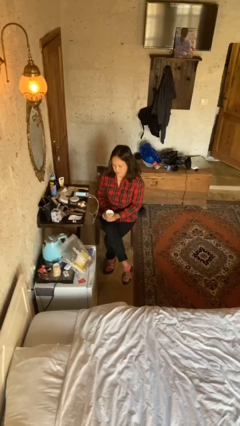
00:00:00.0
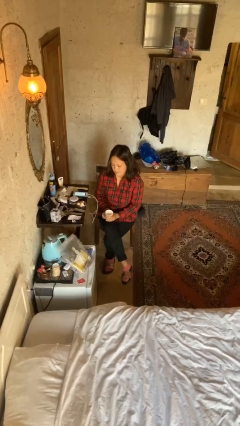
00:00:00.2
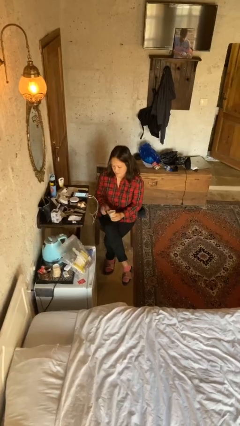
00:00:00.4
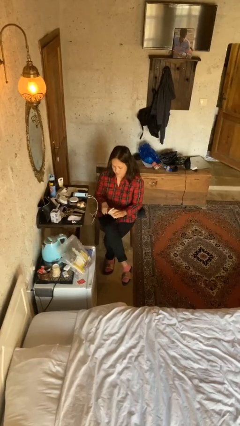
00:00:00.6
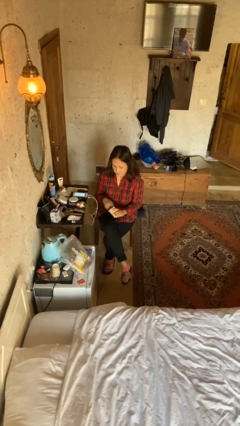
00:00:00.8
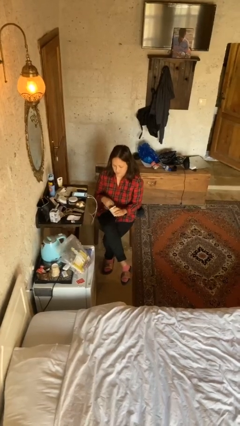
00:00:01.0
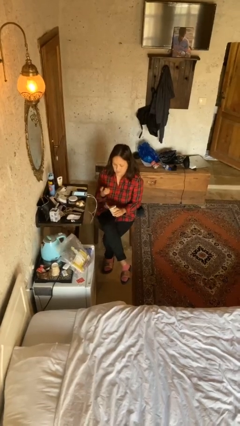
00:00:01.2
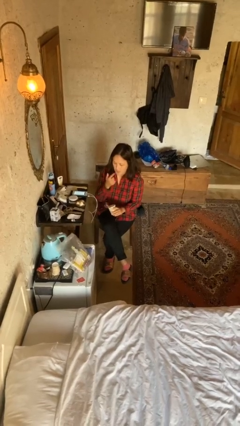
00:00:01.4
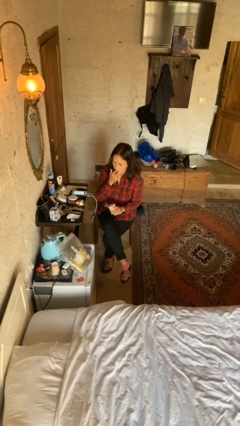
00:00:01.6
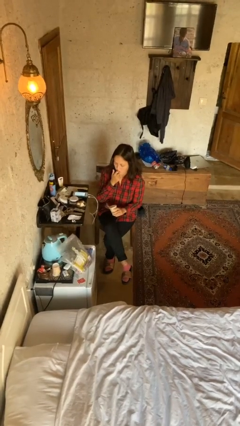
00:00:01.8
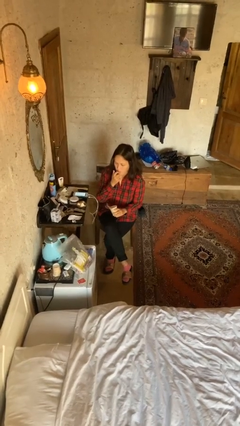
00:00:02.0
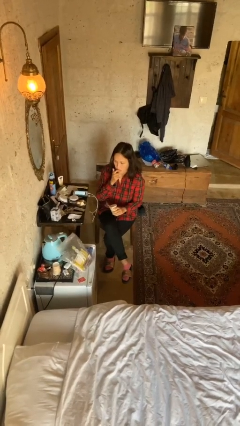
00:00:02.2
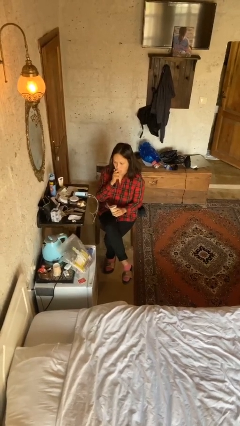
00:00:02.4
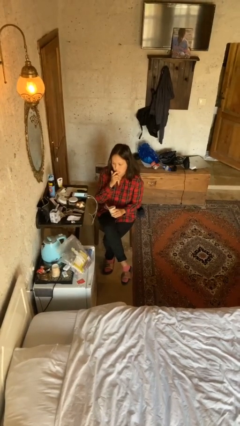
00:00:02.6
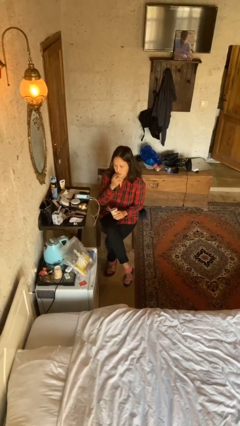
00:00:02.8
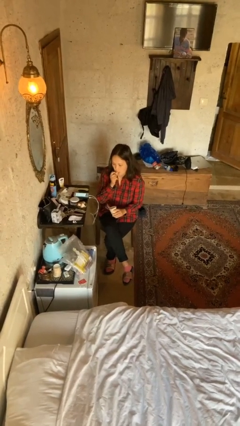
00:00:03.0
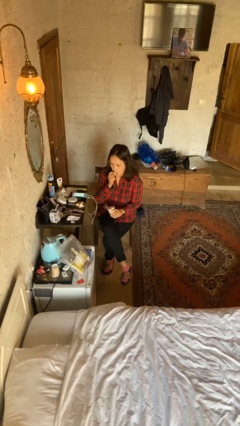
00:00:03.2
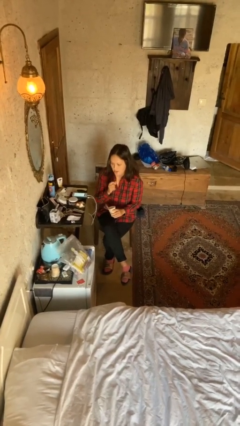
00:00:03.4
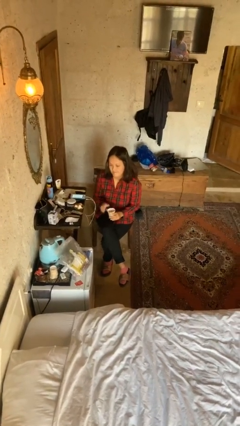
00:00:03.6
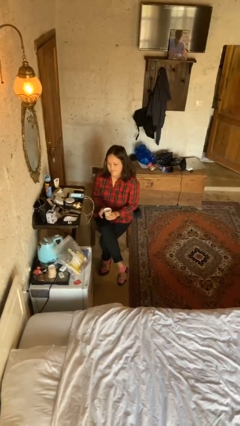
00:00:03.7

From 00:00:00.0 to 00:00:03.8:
person licks fingers

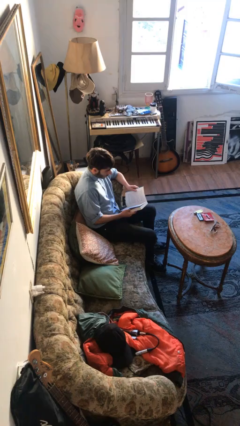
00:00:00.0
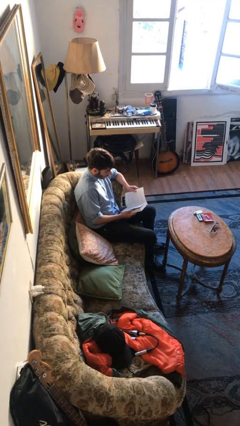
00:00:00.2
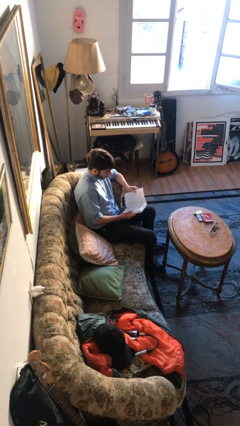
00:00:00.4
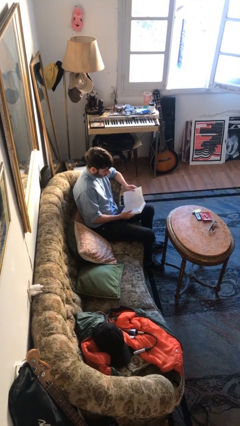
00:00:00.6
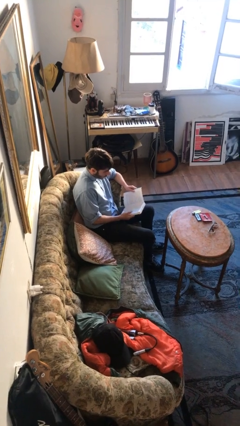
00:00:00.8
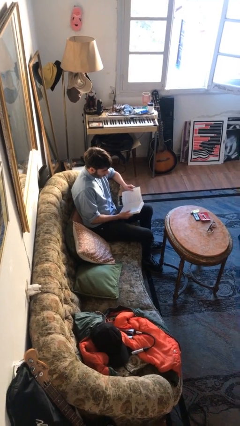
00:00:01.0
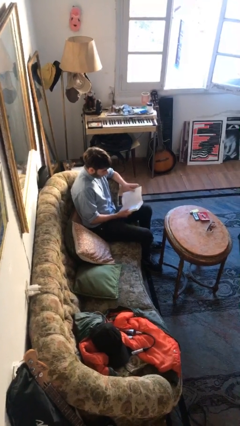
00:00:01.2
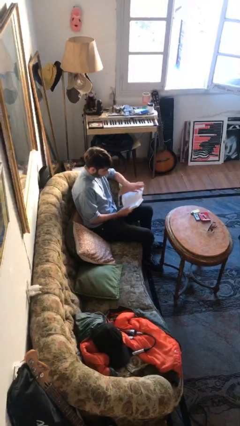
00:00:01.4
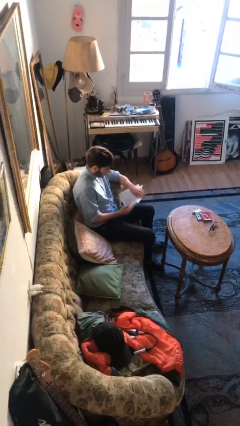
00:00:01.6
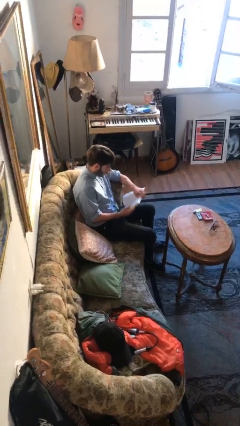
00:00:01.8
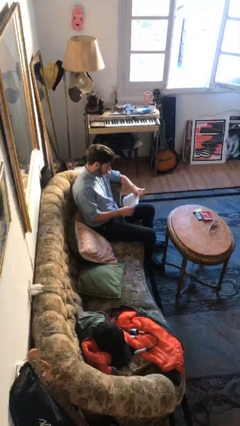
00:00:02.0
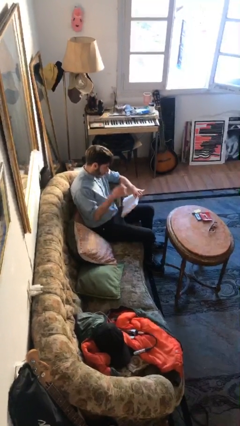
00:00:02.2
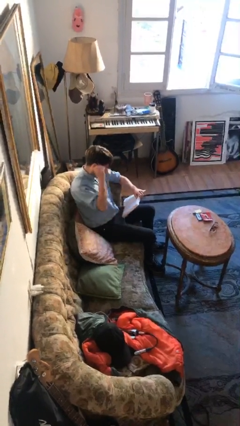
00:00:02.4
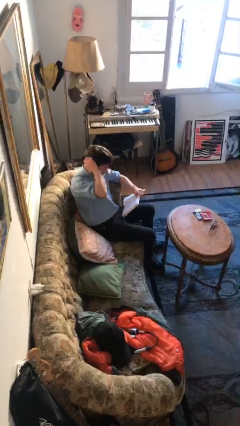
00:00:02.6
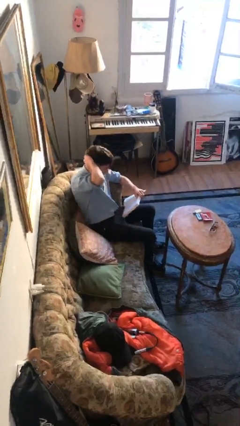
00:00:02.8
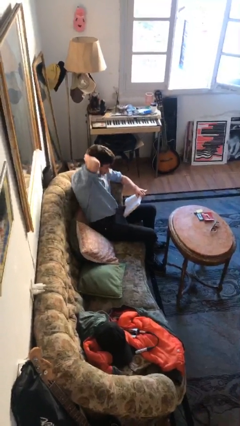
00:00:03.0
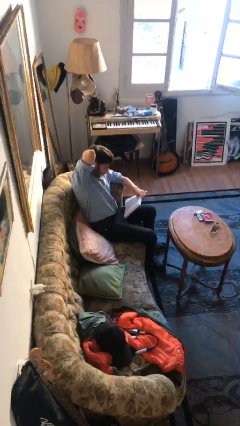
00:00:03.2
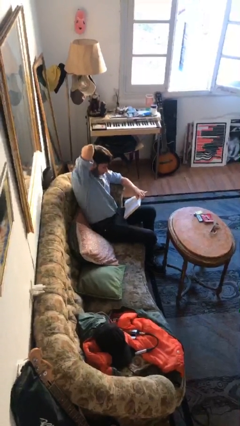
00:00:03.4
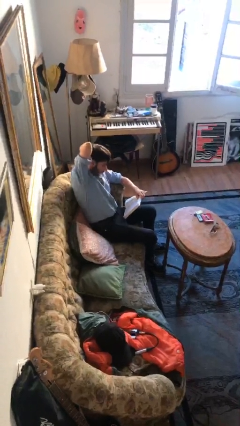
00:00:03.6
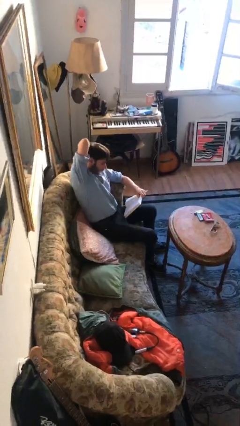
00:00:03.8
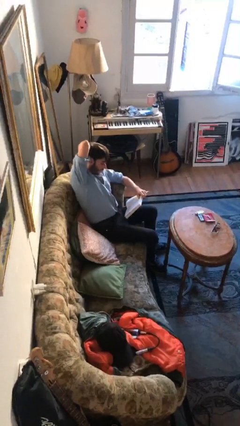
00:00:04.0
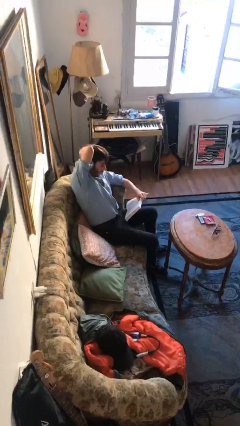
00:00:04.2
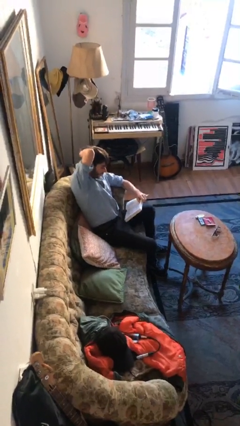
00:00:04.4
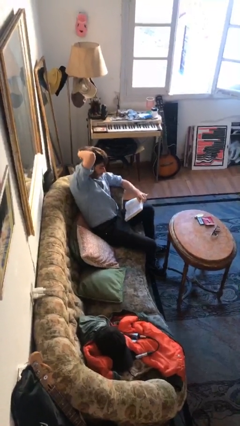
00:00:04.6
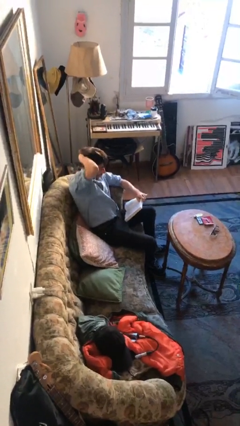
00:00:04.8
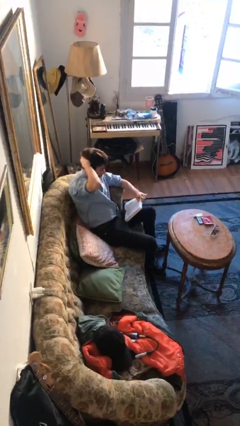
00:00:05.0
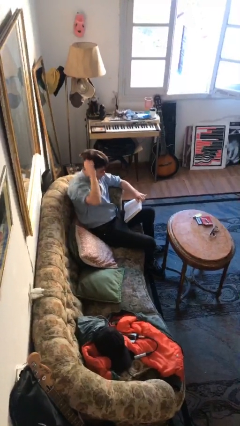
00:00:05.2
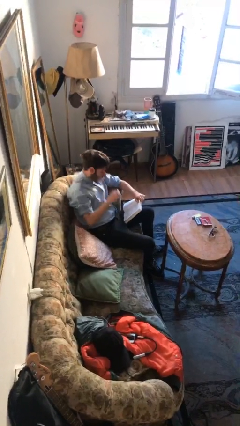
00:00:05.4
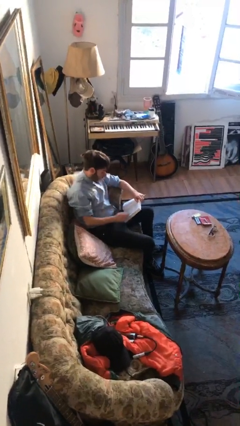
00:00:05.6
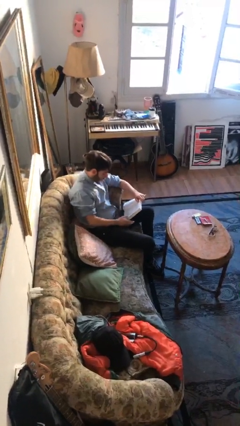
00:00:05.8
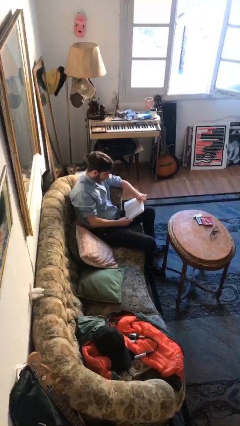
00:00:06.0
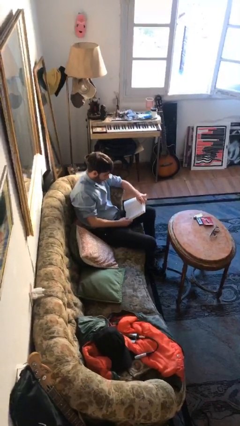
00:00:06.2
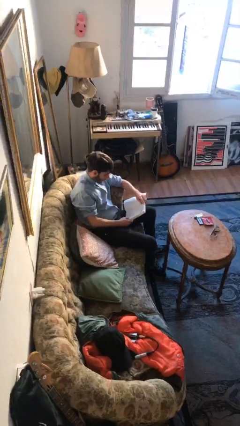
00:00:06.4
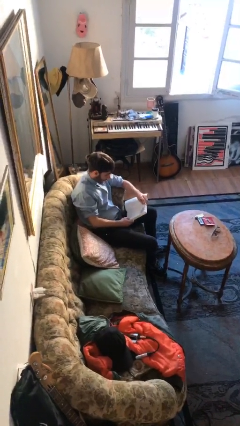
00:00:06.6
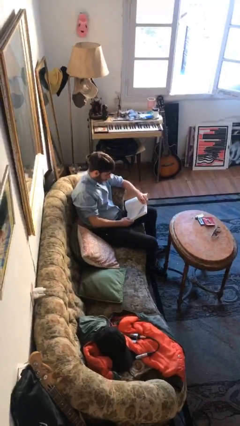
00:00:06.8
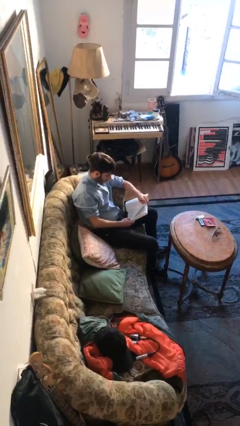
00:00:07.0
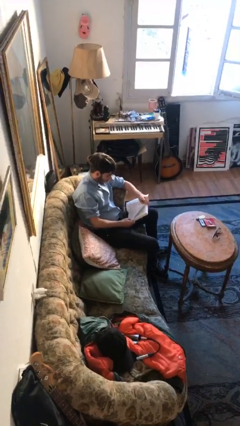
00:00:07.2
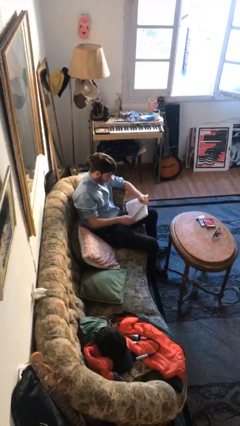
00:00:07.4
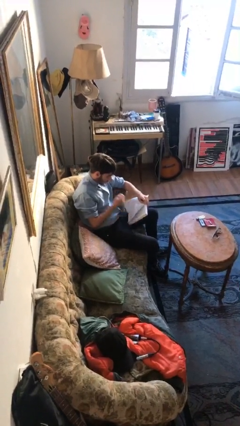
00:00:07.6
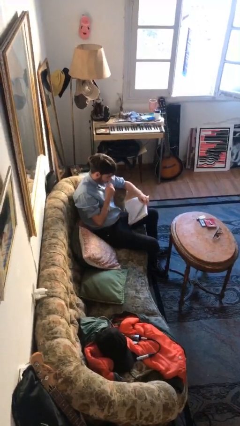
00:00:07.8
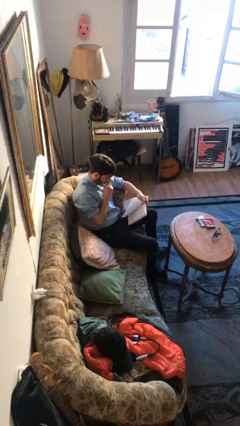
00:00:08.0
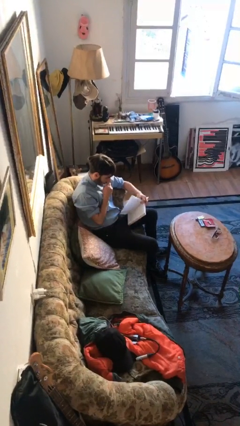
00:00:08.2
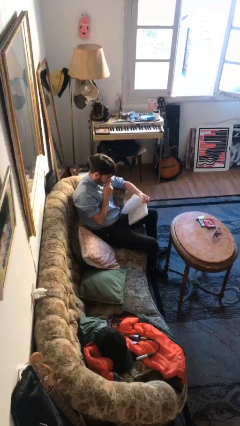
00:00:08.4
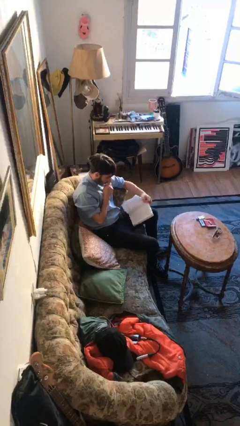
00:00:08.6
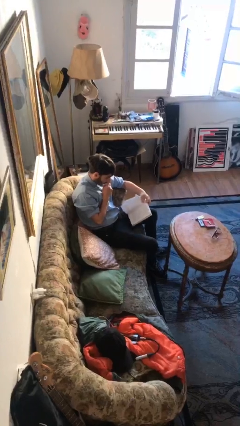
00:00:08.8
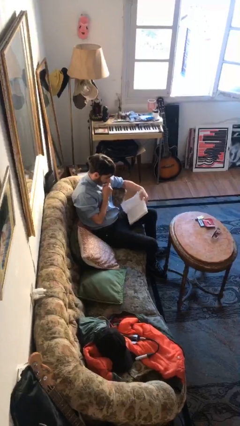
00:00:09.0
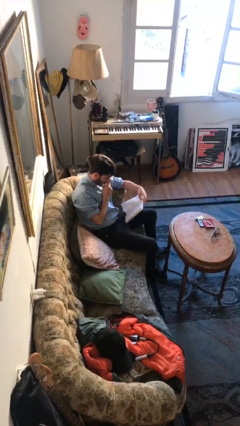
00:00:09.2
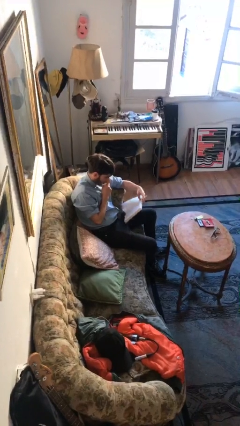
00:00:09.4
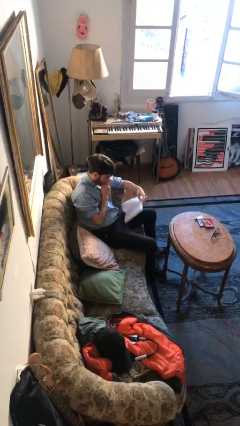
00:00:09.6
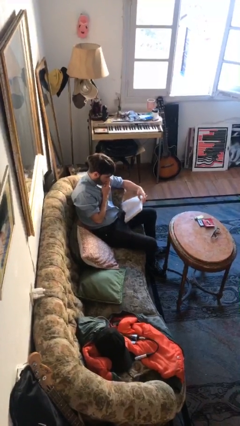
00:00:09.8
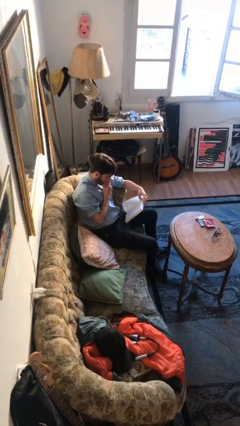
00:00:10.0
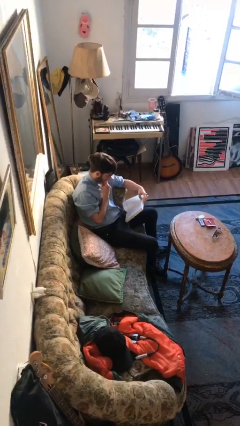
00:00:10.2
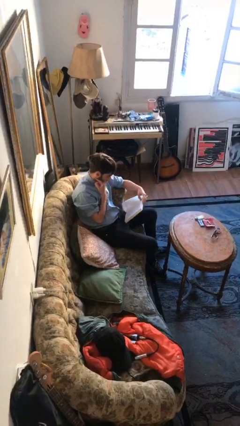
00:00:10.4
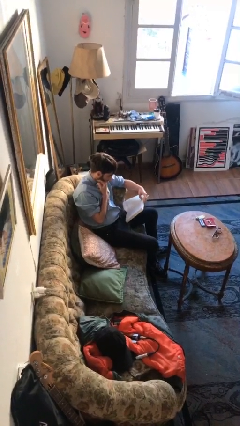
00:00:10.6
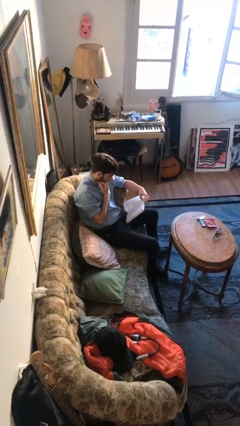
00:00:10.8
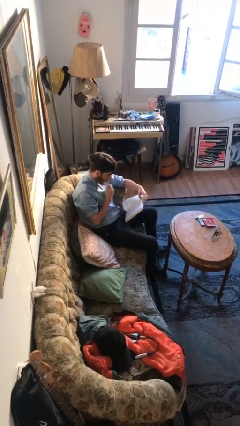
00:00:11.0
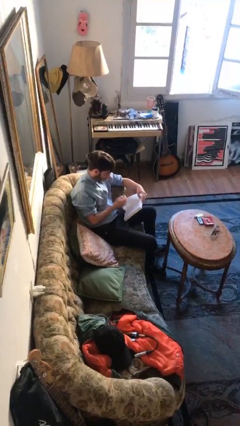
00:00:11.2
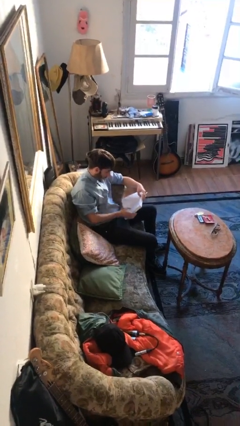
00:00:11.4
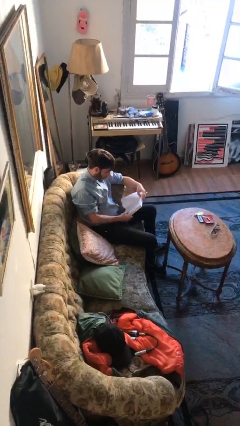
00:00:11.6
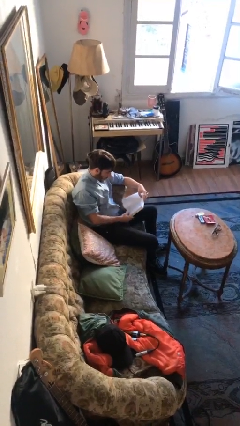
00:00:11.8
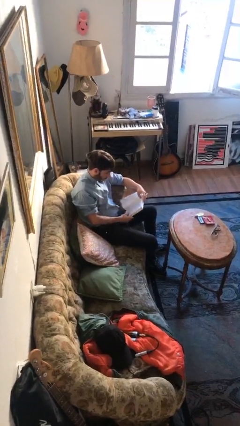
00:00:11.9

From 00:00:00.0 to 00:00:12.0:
person reads document

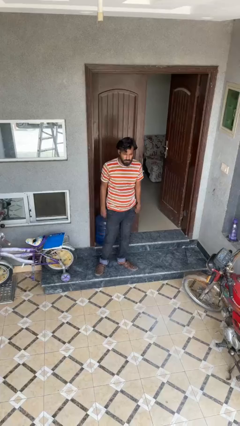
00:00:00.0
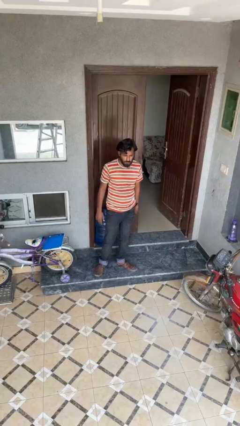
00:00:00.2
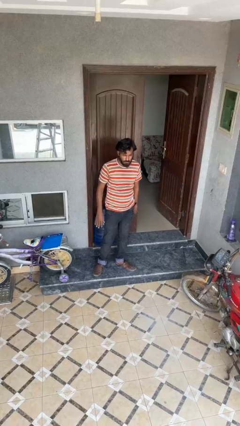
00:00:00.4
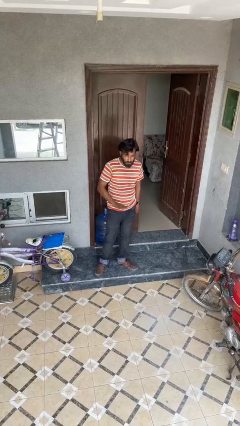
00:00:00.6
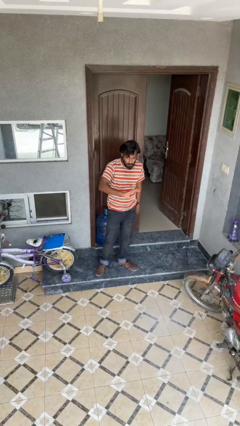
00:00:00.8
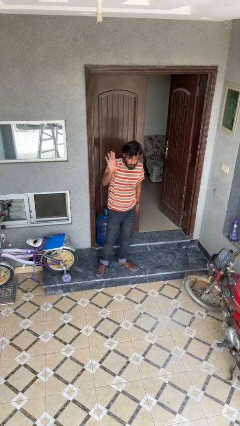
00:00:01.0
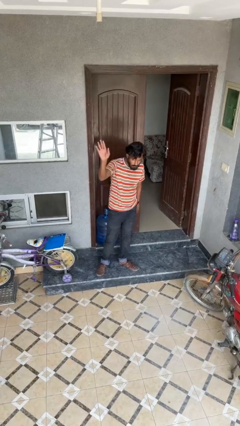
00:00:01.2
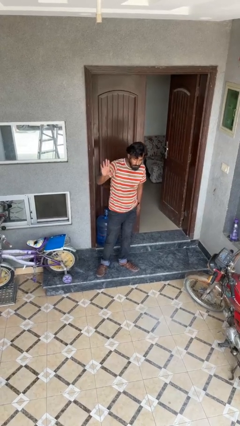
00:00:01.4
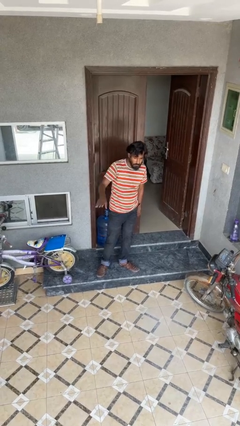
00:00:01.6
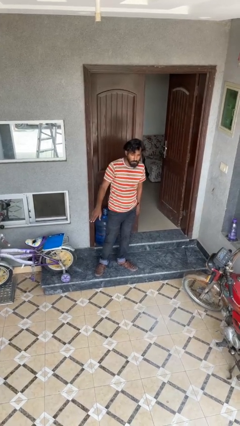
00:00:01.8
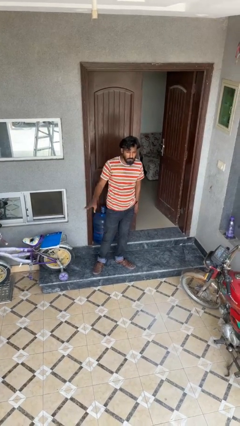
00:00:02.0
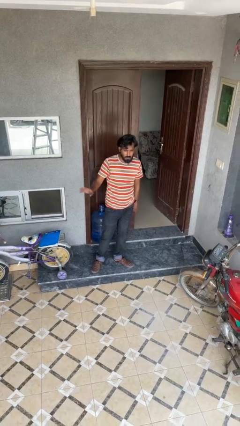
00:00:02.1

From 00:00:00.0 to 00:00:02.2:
person gestures swipe up

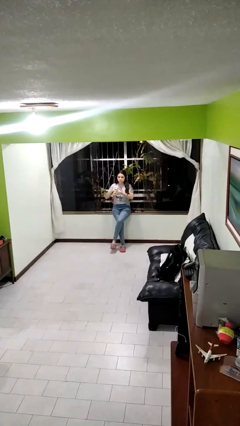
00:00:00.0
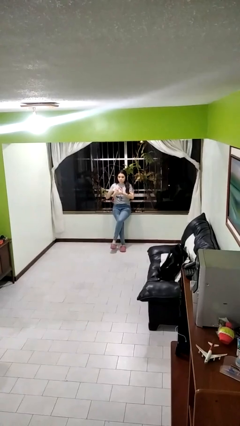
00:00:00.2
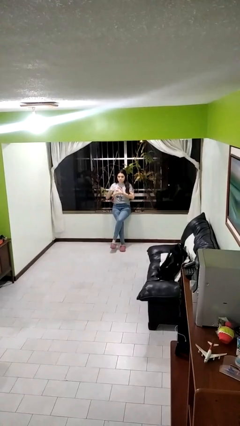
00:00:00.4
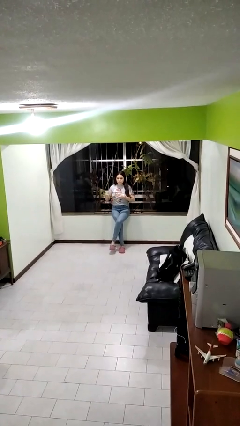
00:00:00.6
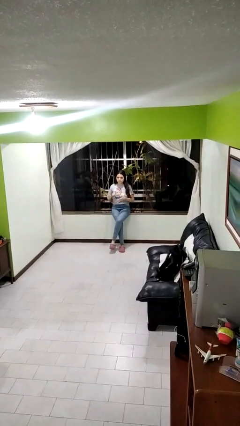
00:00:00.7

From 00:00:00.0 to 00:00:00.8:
person puts on ring
